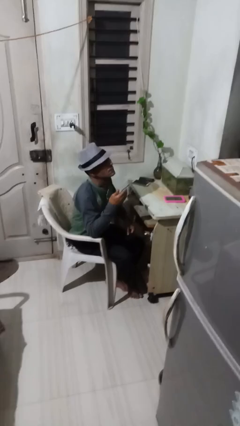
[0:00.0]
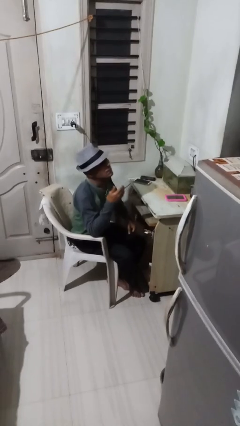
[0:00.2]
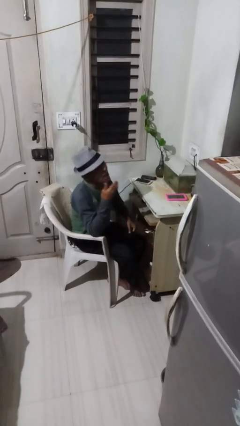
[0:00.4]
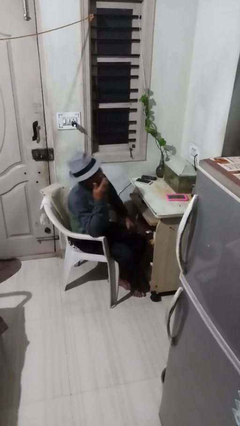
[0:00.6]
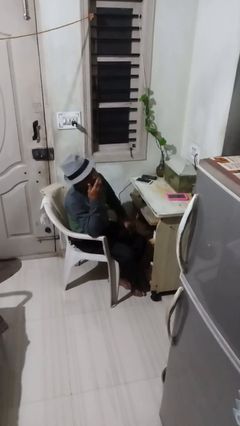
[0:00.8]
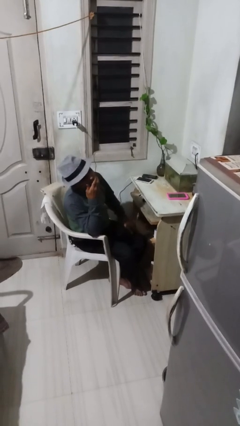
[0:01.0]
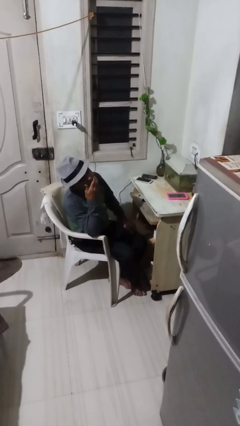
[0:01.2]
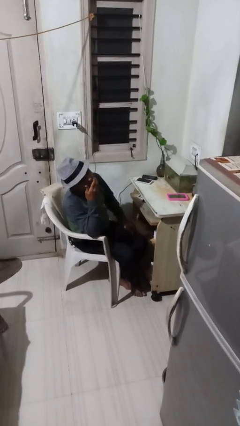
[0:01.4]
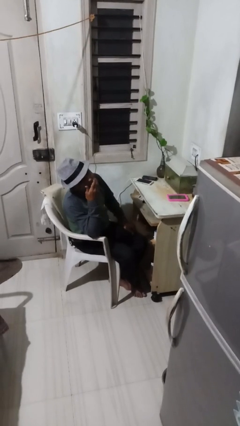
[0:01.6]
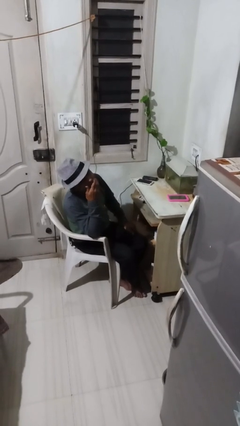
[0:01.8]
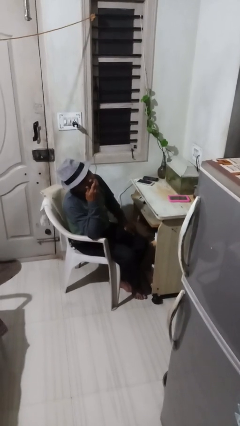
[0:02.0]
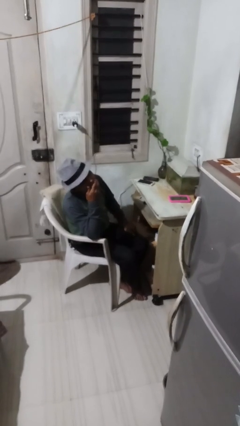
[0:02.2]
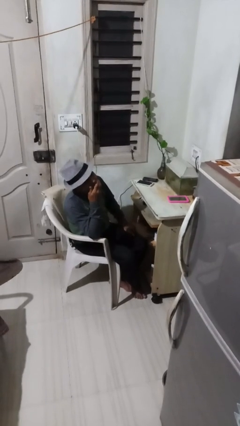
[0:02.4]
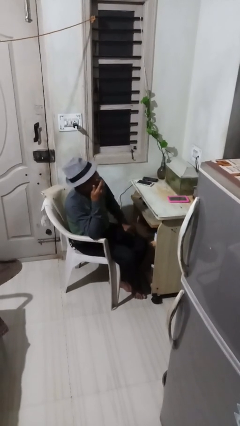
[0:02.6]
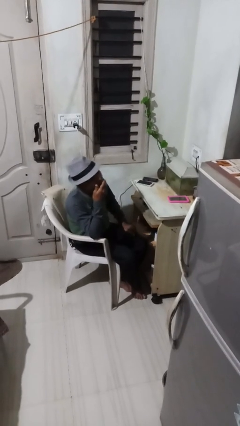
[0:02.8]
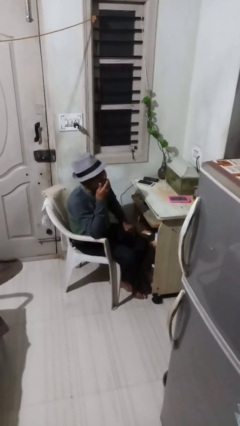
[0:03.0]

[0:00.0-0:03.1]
person yawns

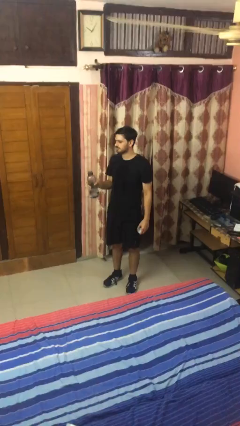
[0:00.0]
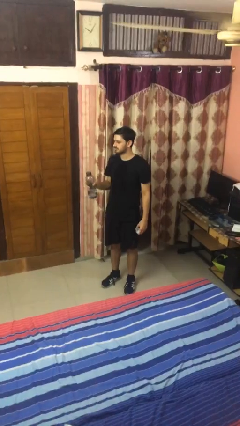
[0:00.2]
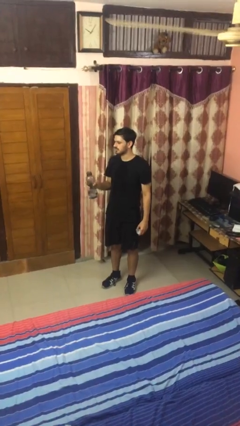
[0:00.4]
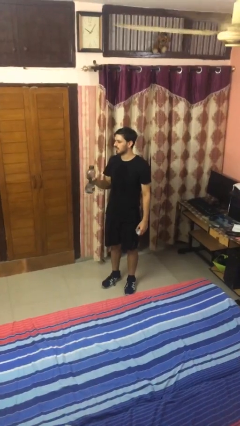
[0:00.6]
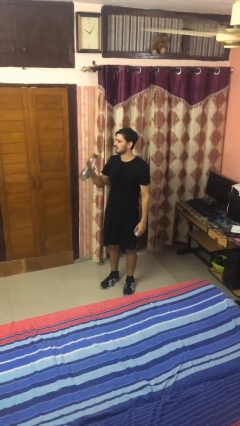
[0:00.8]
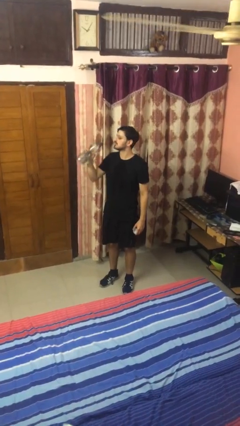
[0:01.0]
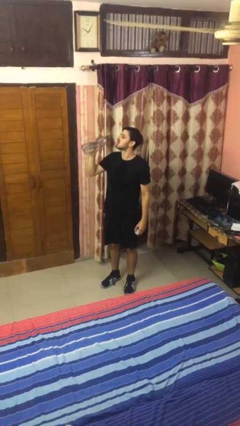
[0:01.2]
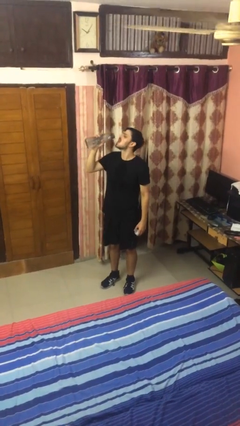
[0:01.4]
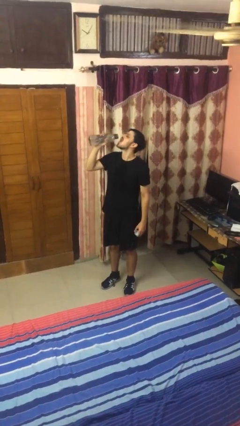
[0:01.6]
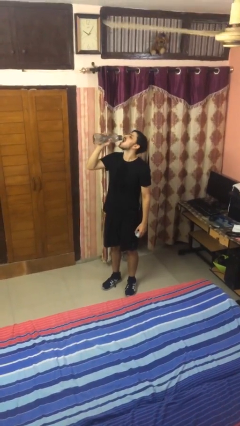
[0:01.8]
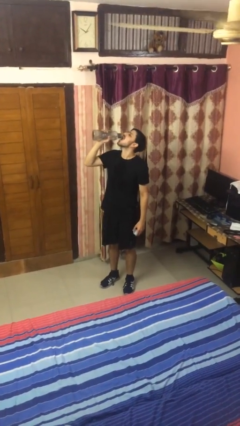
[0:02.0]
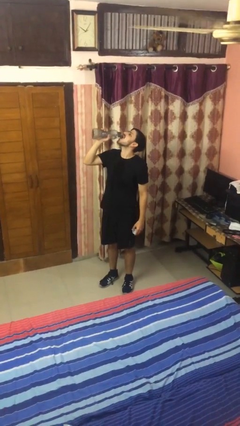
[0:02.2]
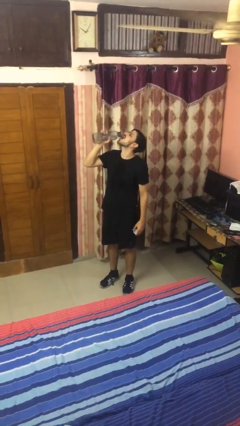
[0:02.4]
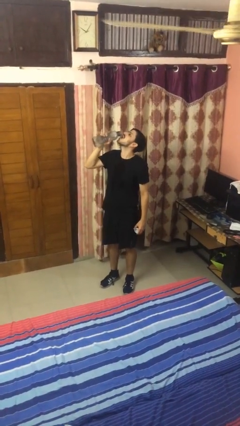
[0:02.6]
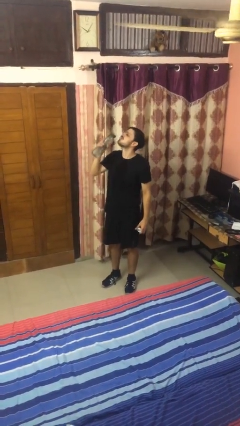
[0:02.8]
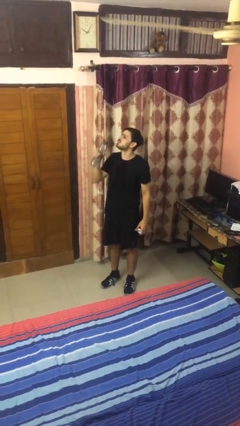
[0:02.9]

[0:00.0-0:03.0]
person drinks from bottle

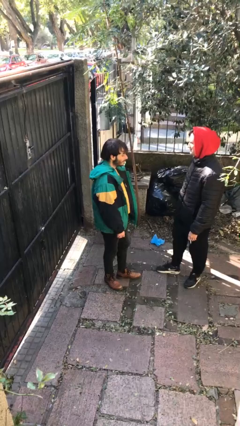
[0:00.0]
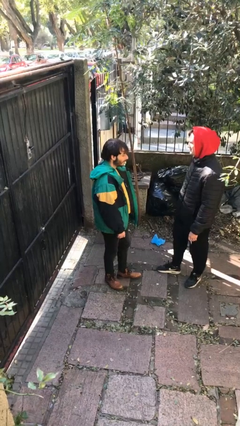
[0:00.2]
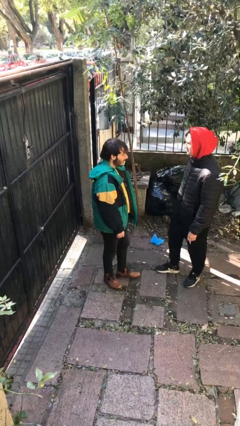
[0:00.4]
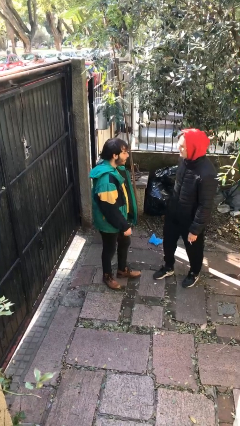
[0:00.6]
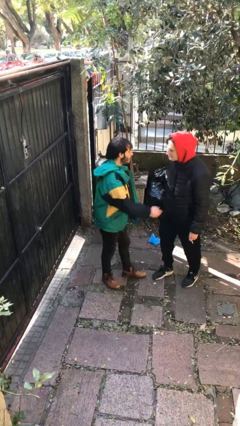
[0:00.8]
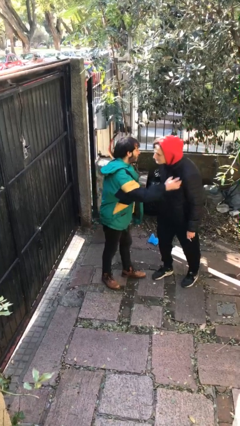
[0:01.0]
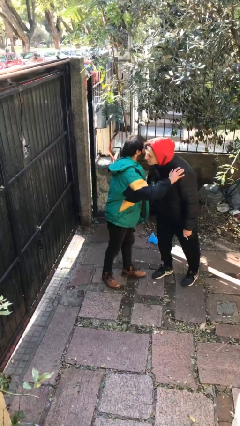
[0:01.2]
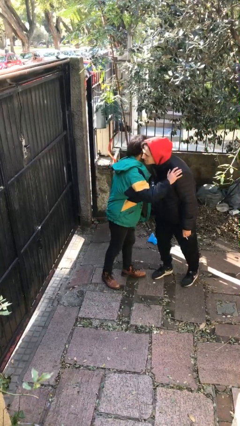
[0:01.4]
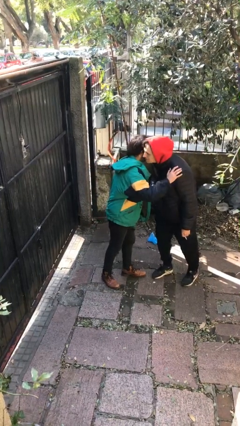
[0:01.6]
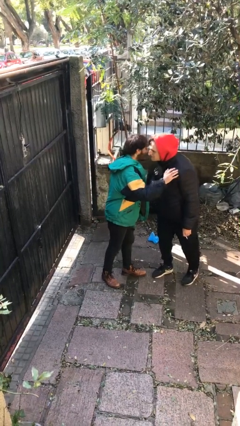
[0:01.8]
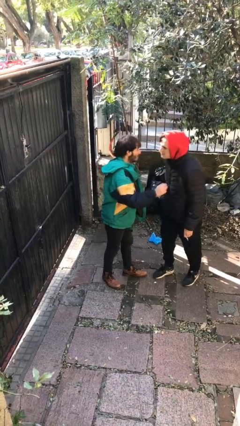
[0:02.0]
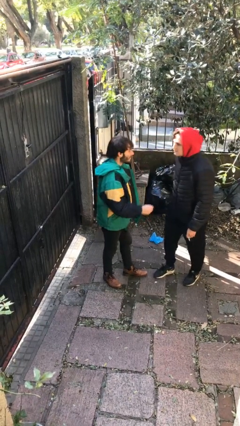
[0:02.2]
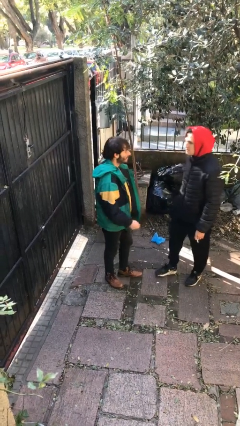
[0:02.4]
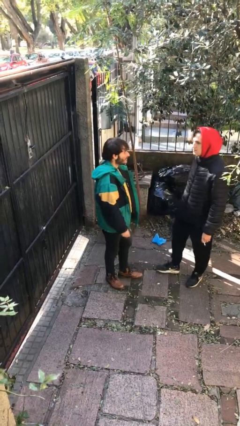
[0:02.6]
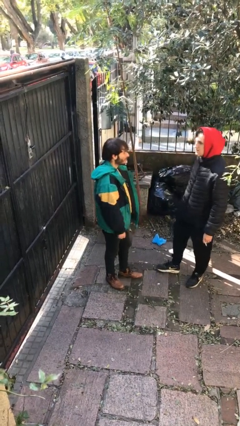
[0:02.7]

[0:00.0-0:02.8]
person kisses cheek of person

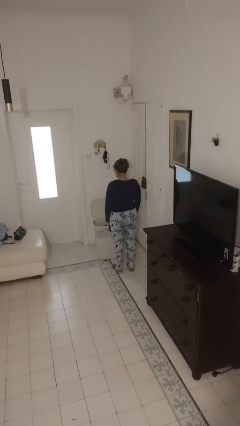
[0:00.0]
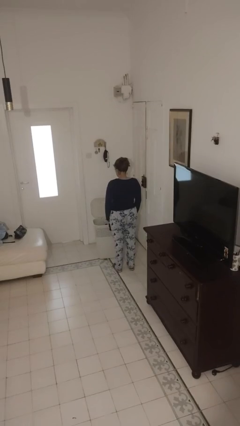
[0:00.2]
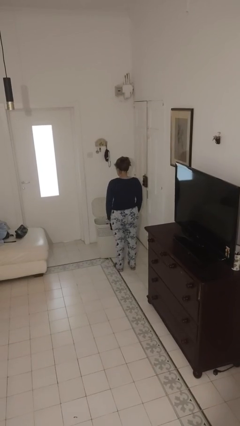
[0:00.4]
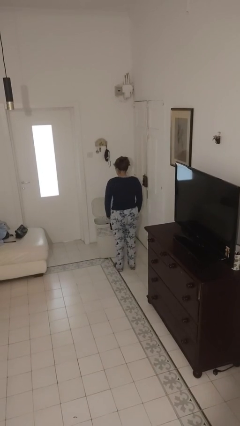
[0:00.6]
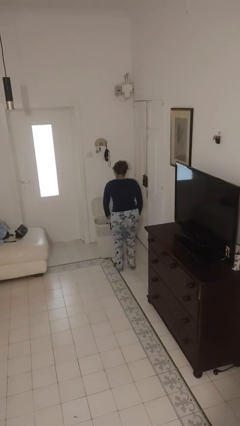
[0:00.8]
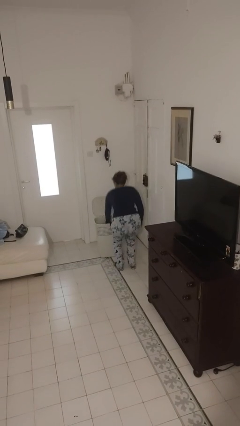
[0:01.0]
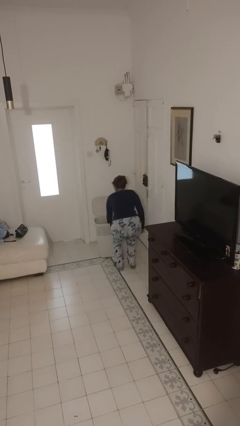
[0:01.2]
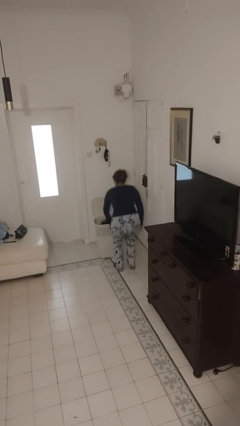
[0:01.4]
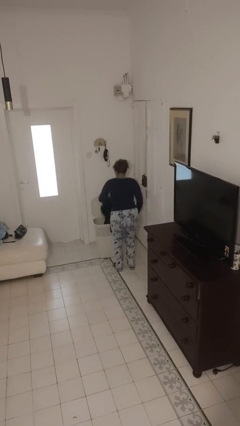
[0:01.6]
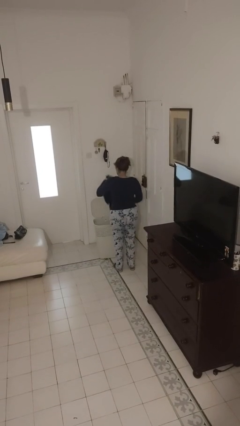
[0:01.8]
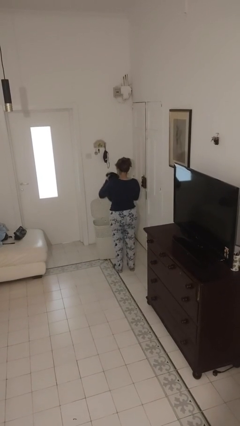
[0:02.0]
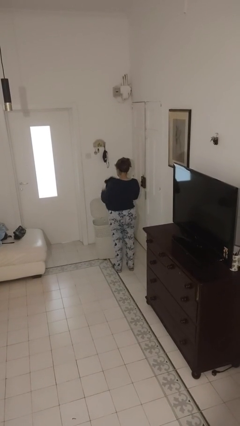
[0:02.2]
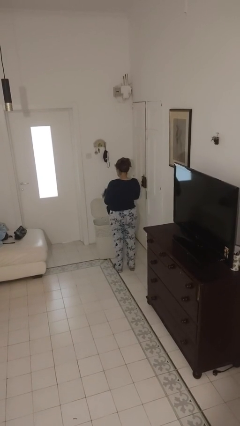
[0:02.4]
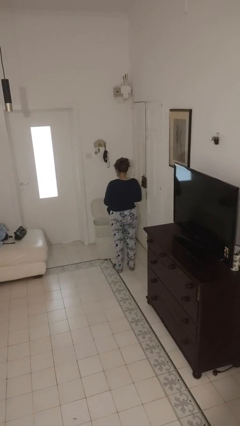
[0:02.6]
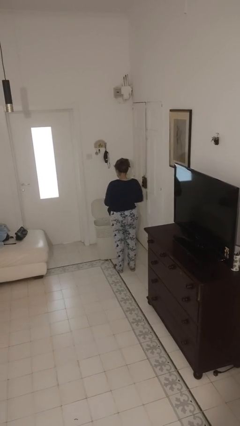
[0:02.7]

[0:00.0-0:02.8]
person takes object from basket

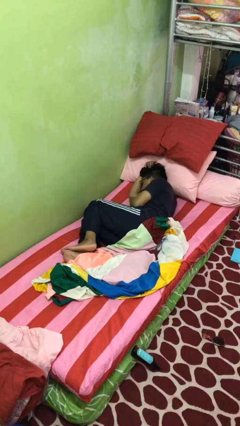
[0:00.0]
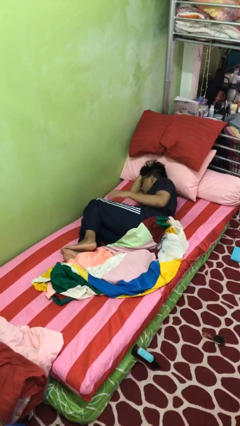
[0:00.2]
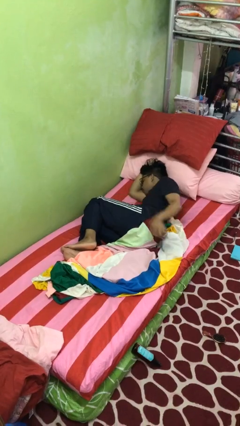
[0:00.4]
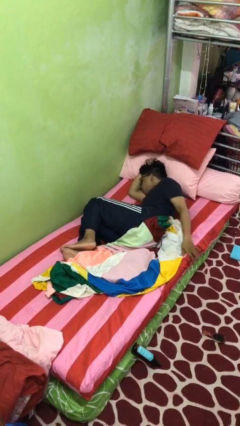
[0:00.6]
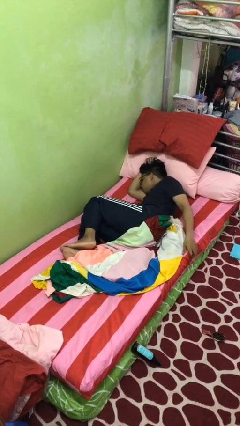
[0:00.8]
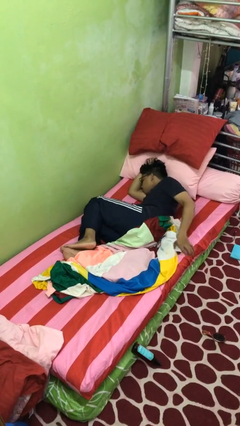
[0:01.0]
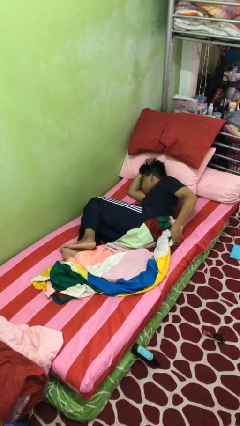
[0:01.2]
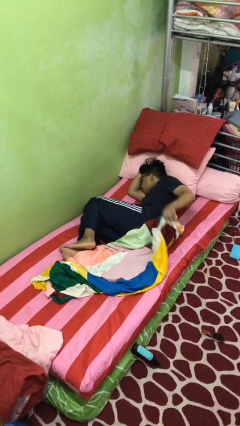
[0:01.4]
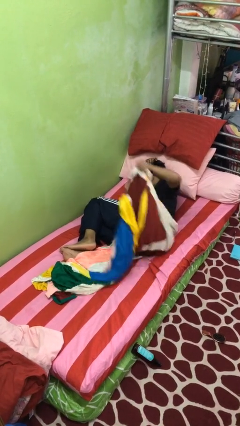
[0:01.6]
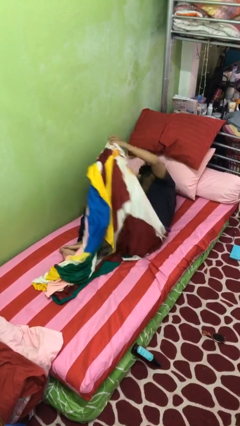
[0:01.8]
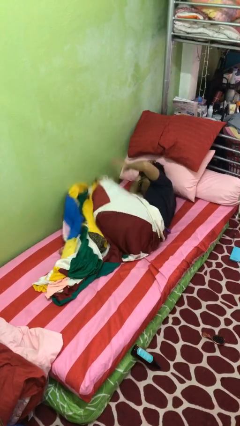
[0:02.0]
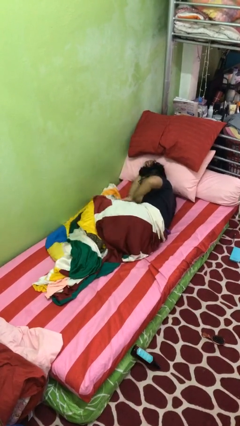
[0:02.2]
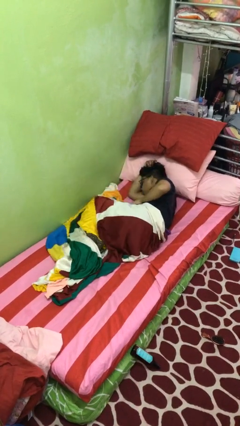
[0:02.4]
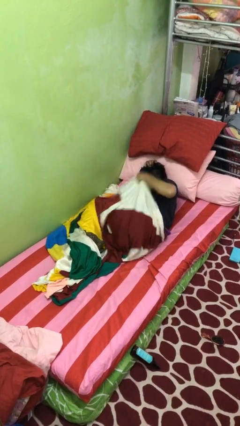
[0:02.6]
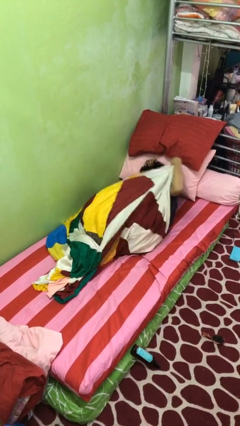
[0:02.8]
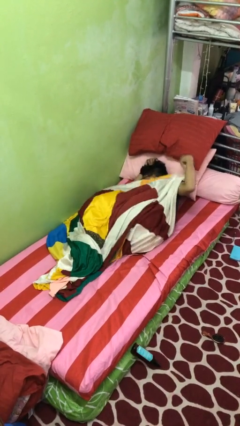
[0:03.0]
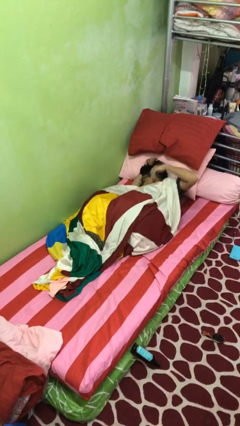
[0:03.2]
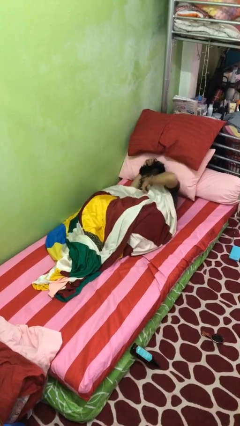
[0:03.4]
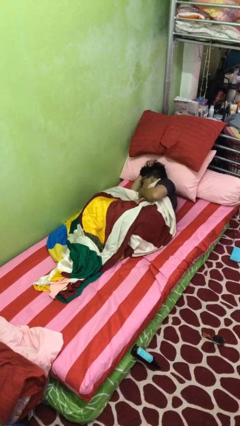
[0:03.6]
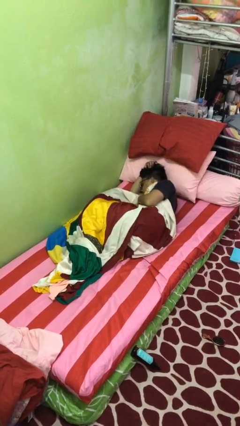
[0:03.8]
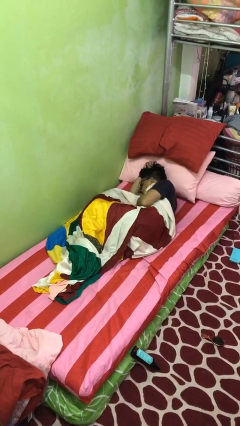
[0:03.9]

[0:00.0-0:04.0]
person covers with blanket

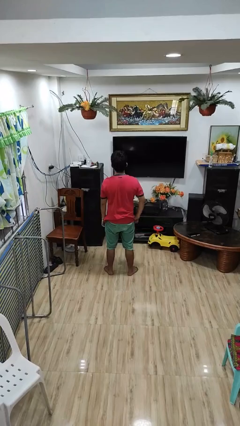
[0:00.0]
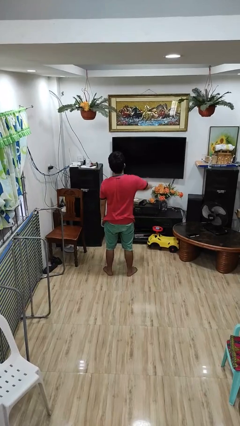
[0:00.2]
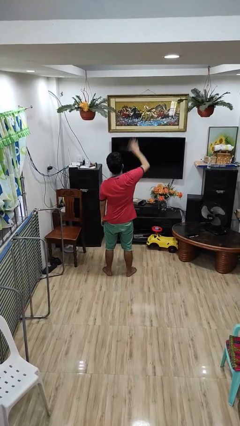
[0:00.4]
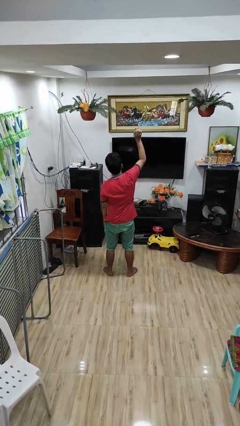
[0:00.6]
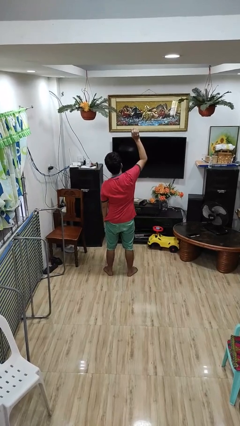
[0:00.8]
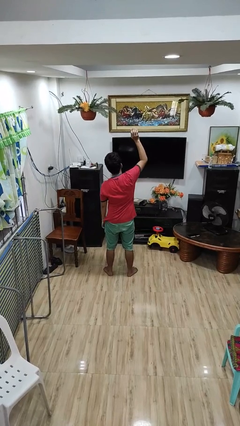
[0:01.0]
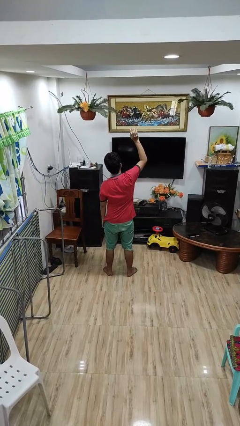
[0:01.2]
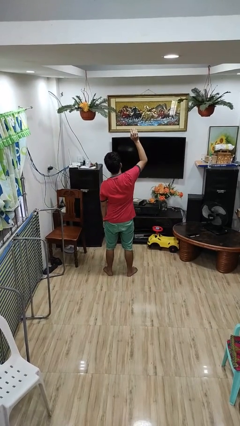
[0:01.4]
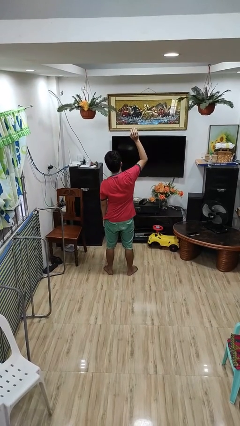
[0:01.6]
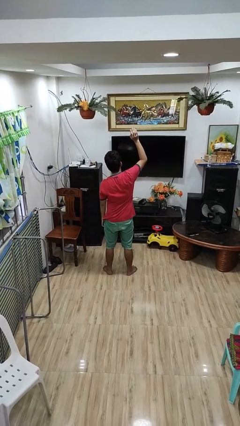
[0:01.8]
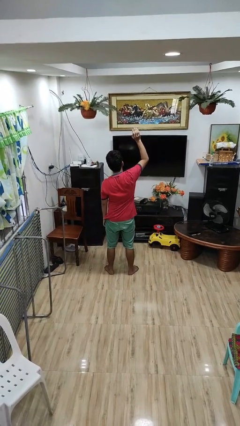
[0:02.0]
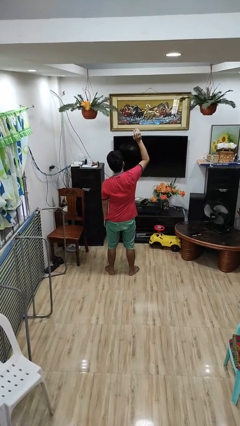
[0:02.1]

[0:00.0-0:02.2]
person gestures swipe up
